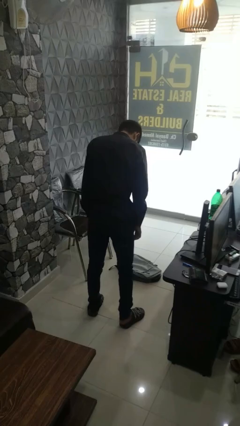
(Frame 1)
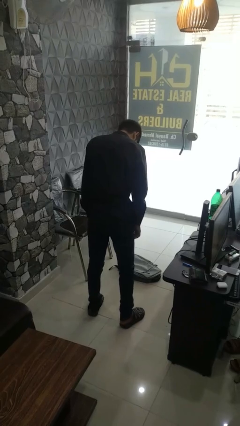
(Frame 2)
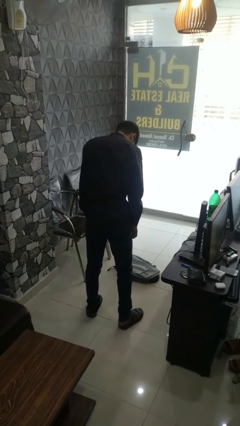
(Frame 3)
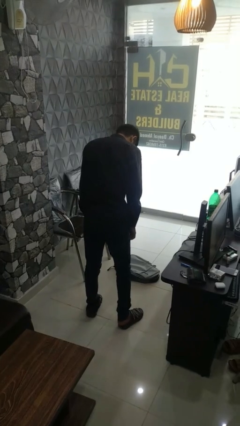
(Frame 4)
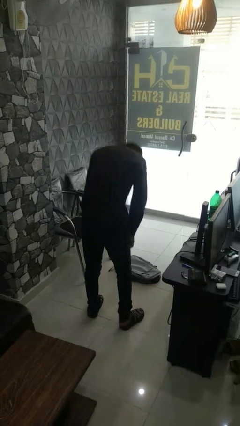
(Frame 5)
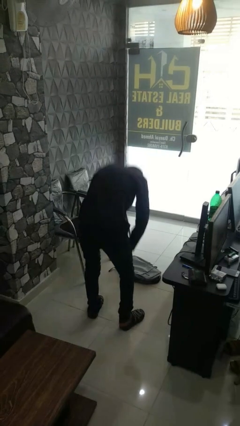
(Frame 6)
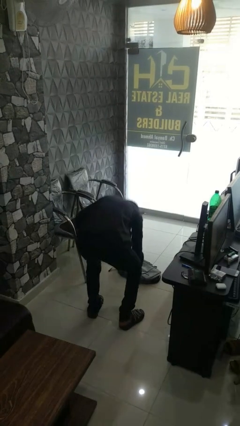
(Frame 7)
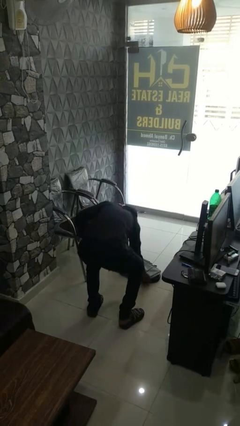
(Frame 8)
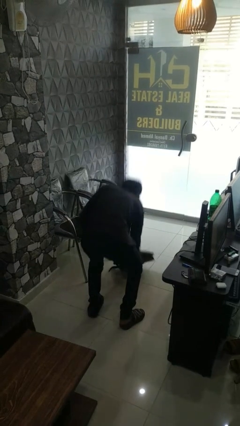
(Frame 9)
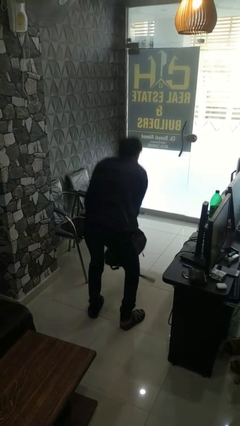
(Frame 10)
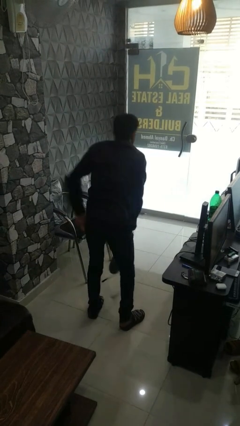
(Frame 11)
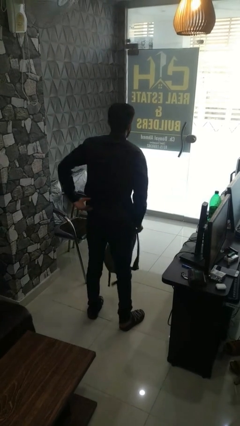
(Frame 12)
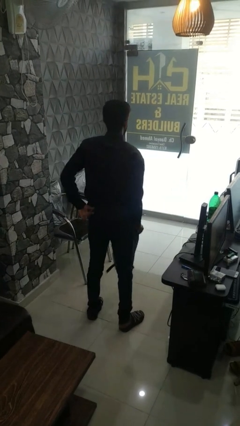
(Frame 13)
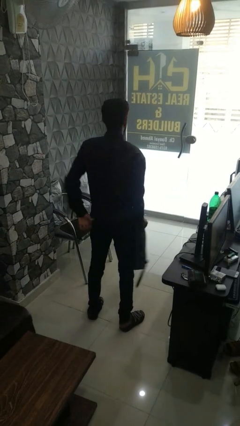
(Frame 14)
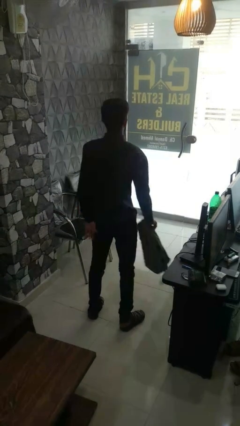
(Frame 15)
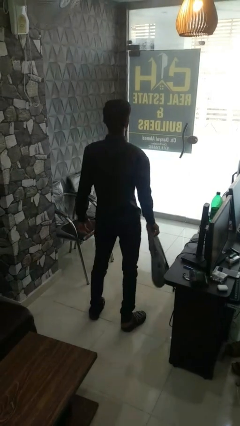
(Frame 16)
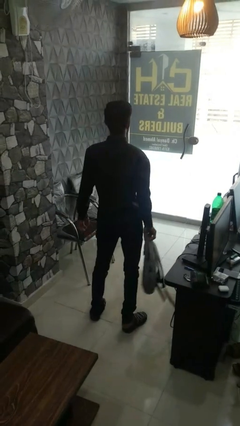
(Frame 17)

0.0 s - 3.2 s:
person picks up object from floor

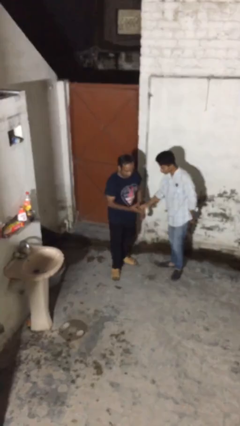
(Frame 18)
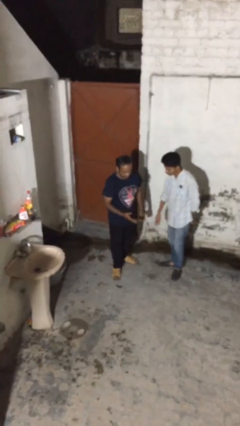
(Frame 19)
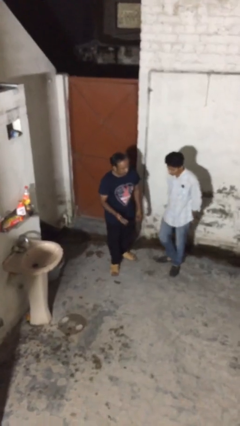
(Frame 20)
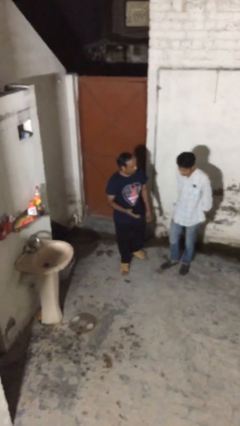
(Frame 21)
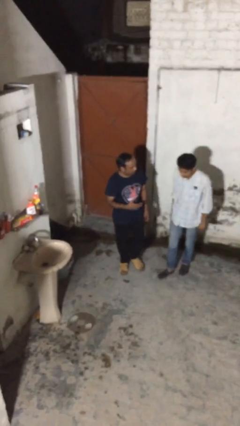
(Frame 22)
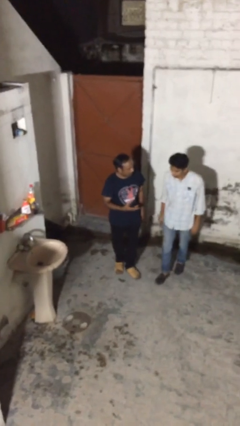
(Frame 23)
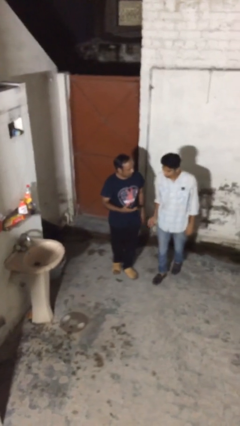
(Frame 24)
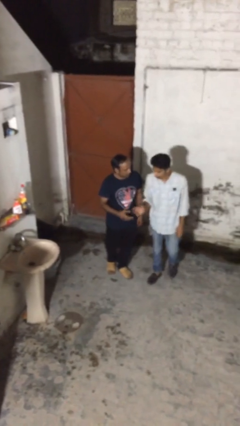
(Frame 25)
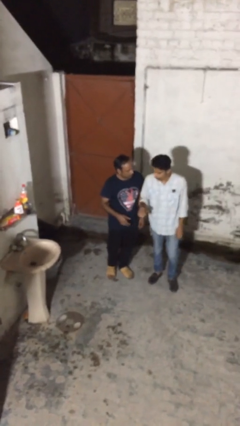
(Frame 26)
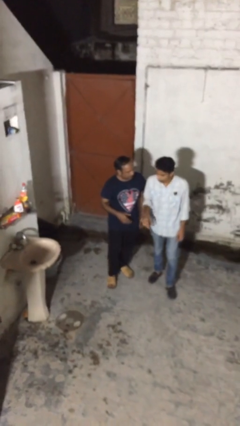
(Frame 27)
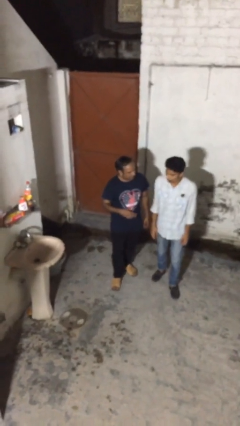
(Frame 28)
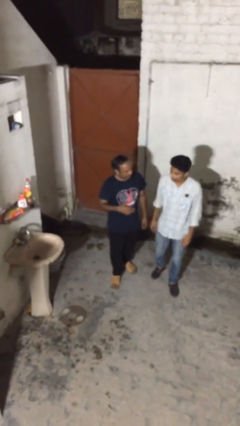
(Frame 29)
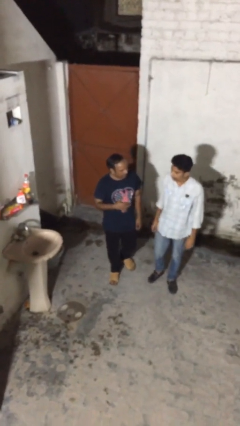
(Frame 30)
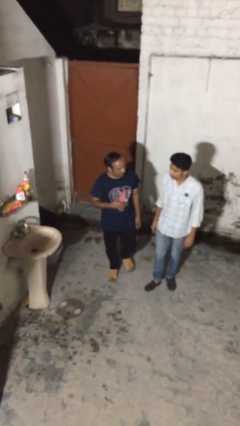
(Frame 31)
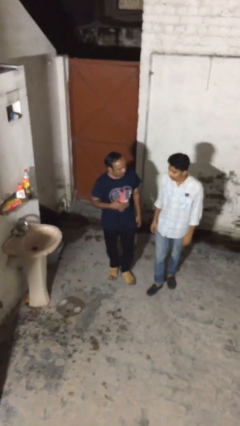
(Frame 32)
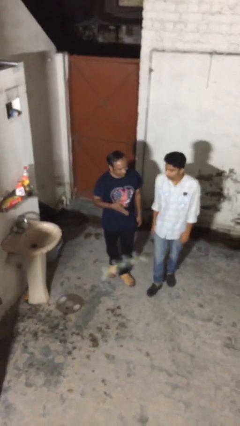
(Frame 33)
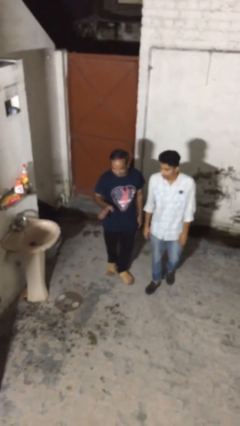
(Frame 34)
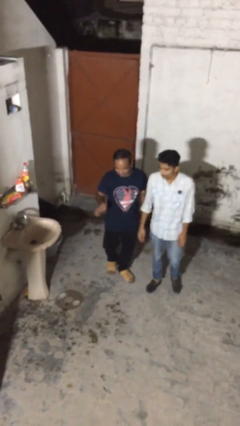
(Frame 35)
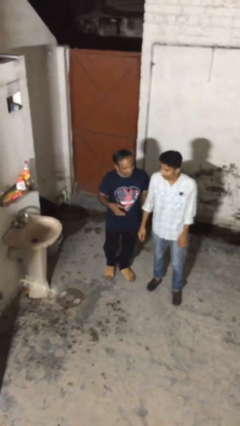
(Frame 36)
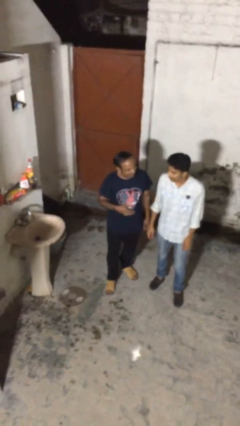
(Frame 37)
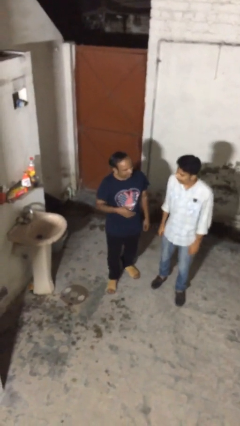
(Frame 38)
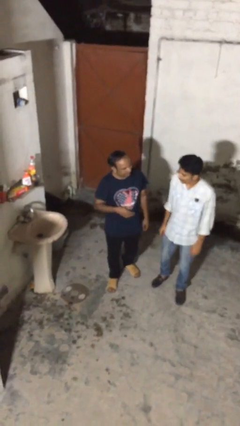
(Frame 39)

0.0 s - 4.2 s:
person talks to person

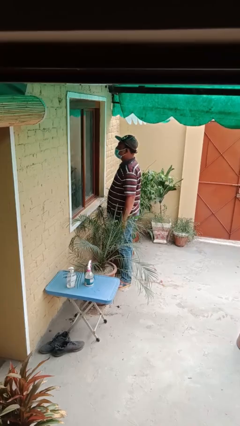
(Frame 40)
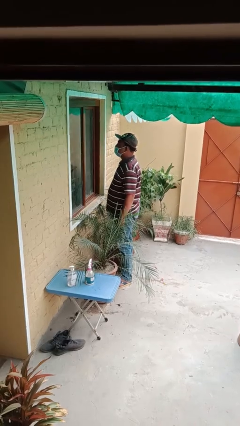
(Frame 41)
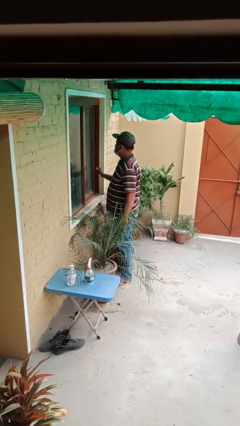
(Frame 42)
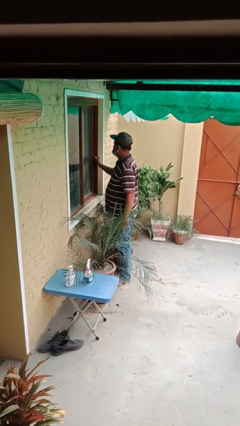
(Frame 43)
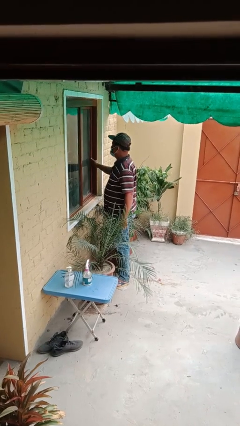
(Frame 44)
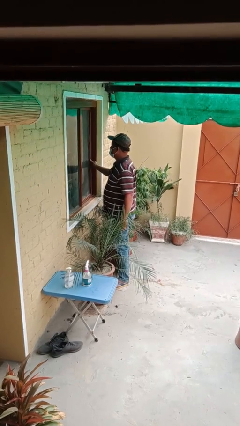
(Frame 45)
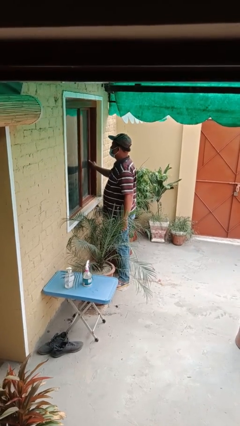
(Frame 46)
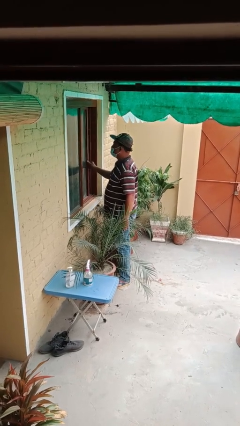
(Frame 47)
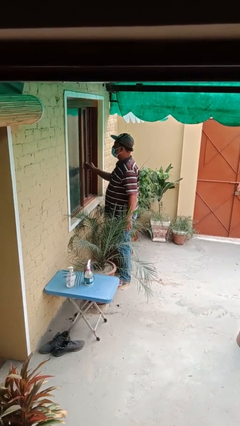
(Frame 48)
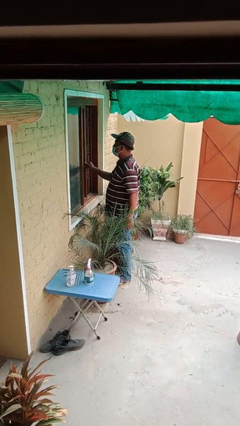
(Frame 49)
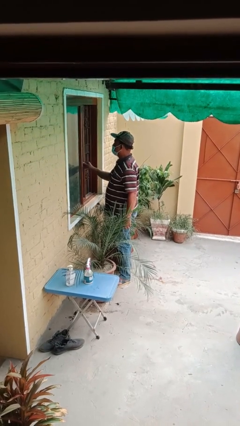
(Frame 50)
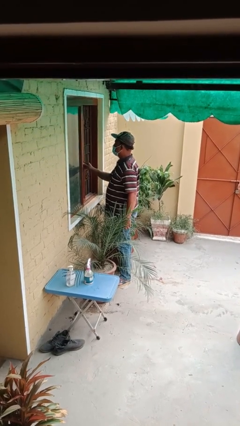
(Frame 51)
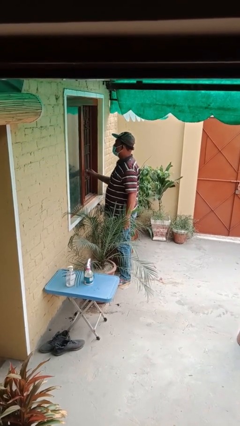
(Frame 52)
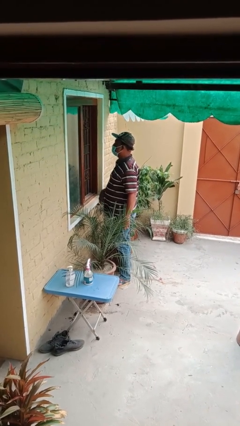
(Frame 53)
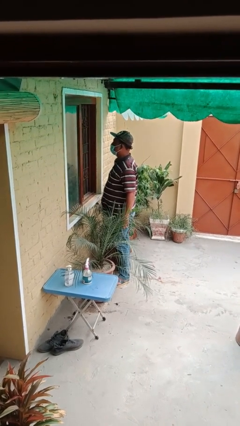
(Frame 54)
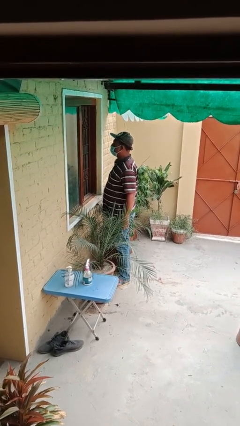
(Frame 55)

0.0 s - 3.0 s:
person opens home window

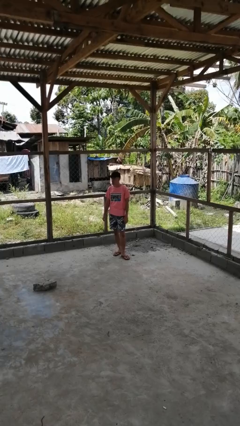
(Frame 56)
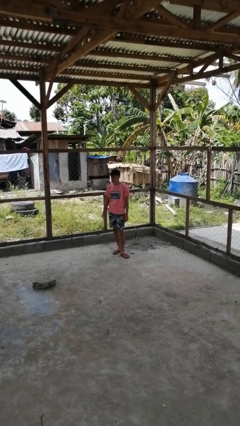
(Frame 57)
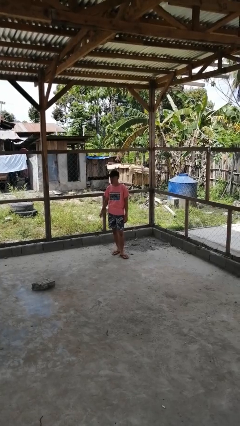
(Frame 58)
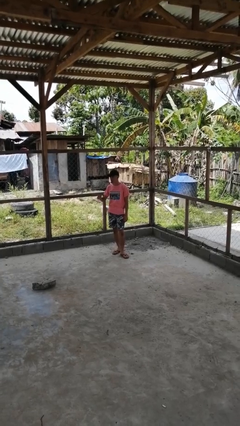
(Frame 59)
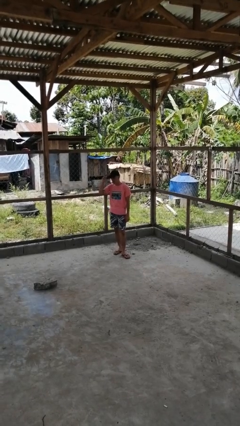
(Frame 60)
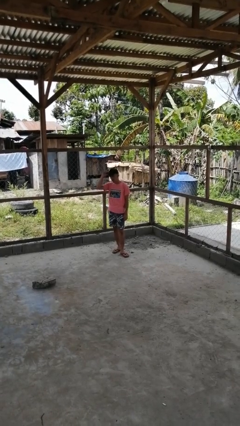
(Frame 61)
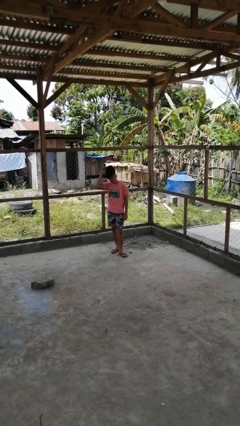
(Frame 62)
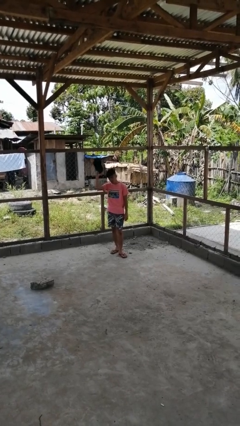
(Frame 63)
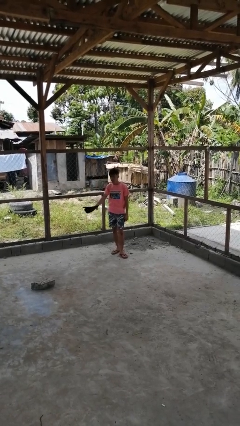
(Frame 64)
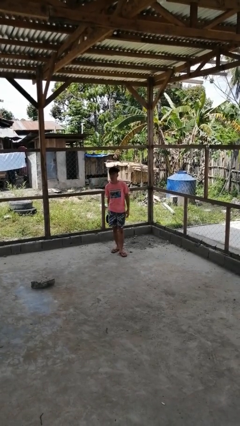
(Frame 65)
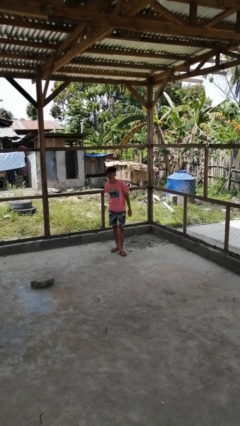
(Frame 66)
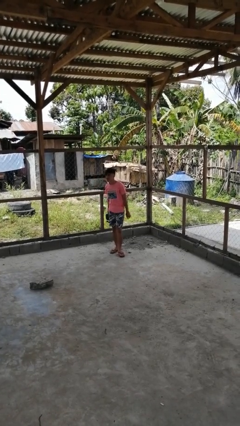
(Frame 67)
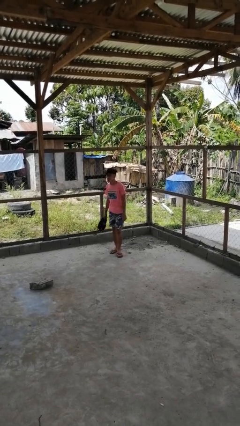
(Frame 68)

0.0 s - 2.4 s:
person takes off hat

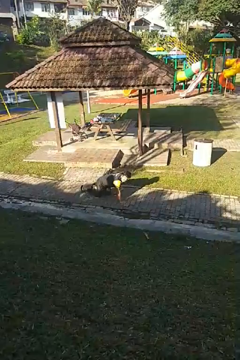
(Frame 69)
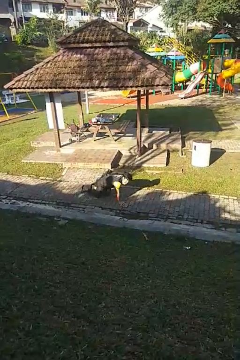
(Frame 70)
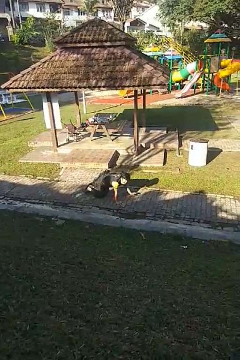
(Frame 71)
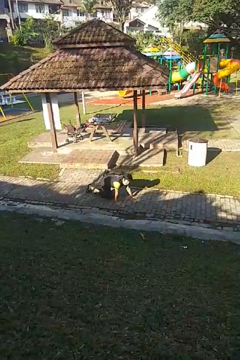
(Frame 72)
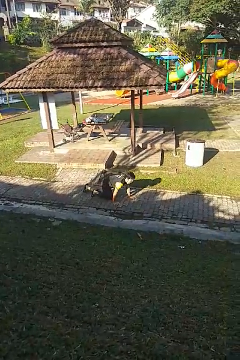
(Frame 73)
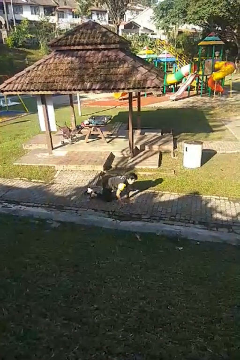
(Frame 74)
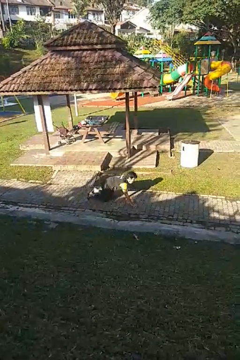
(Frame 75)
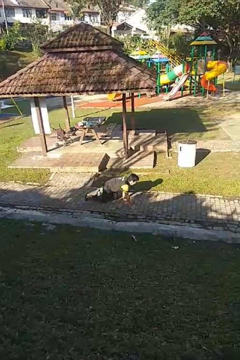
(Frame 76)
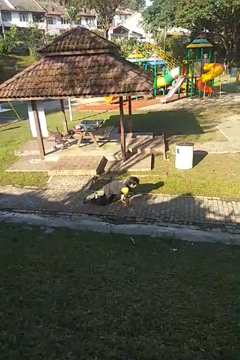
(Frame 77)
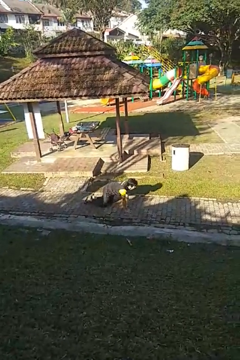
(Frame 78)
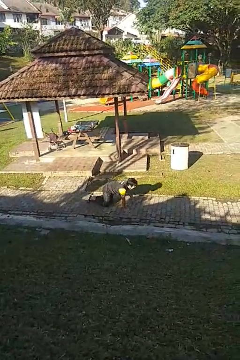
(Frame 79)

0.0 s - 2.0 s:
person crawls

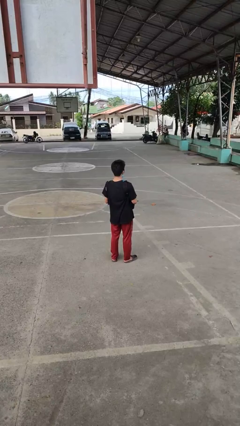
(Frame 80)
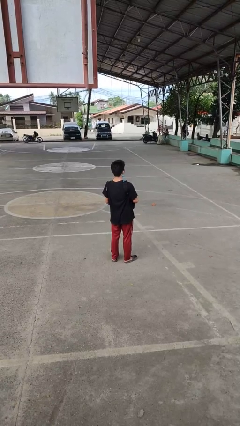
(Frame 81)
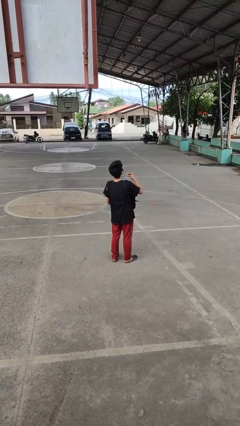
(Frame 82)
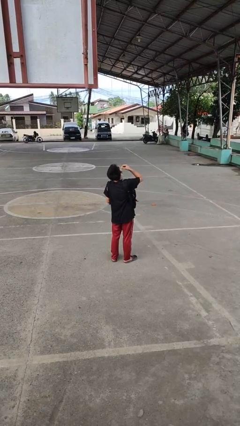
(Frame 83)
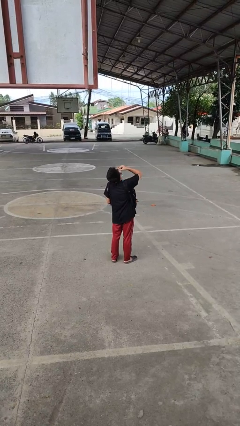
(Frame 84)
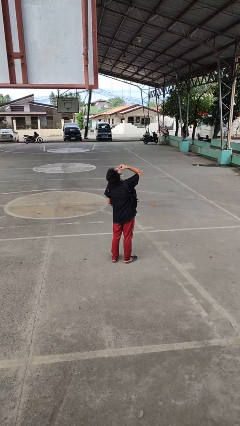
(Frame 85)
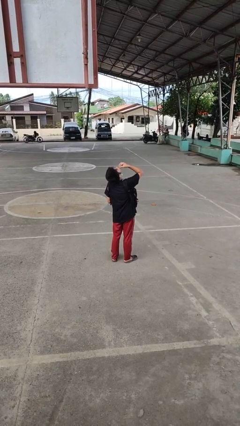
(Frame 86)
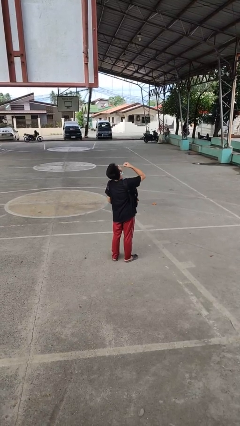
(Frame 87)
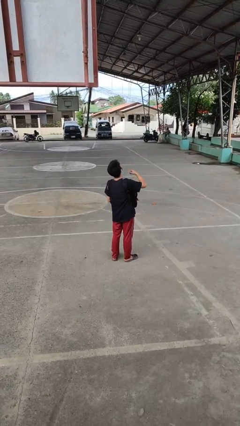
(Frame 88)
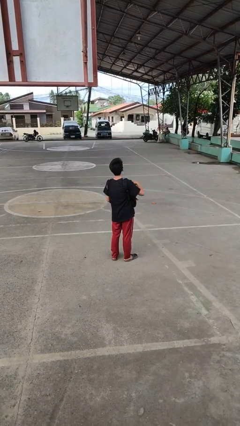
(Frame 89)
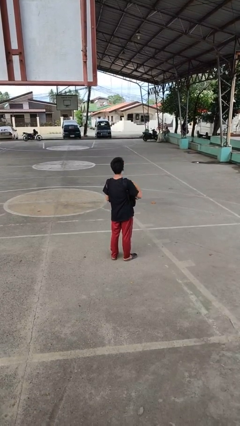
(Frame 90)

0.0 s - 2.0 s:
person eats snack from bag

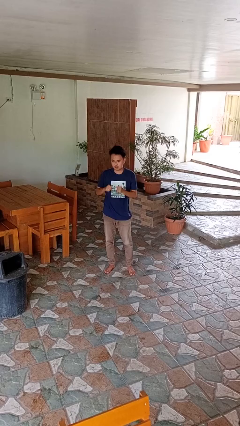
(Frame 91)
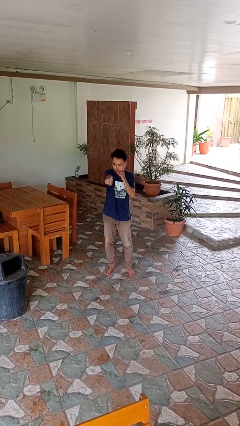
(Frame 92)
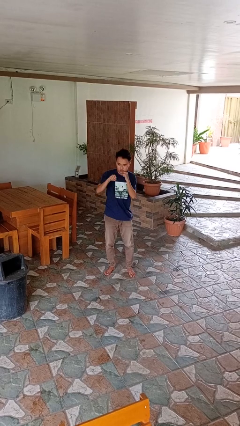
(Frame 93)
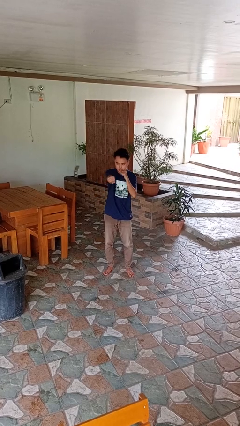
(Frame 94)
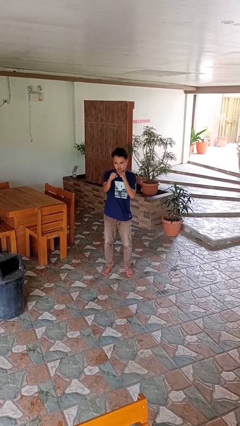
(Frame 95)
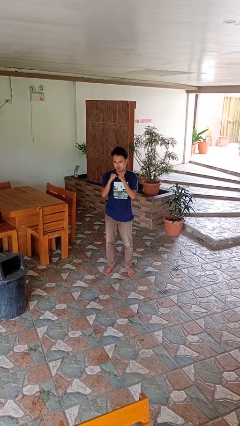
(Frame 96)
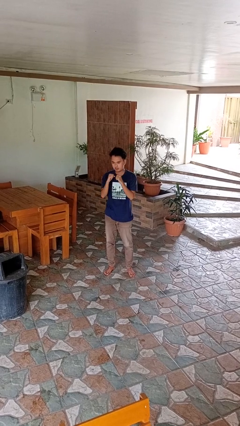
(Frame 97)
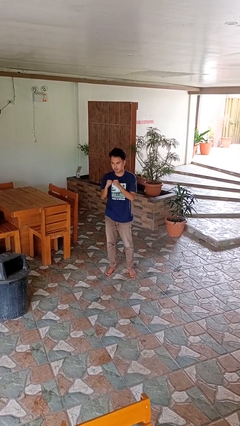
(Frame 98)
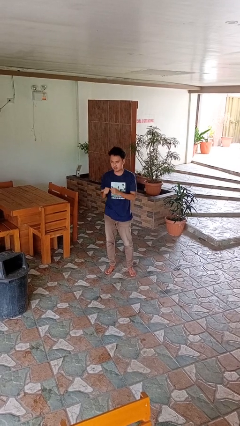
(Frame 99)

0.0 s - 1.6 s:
person punches
